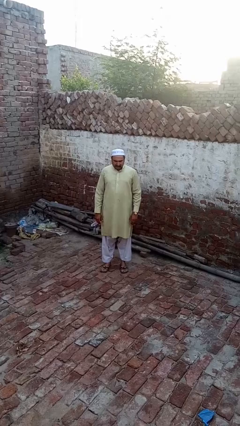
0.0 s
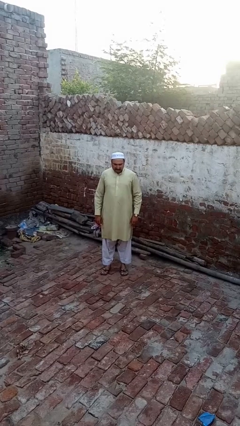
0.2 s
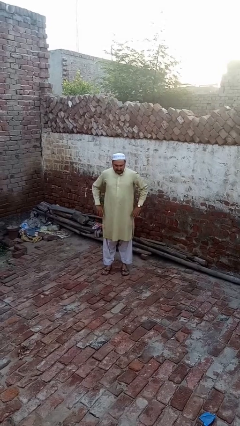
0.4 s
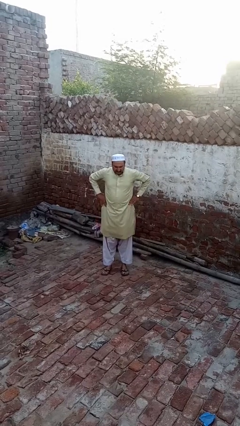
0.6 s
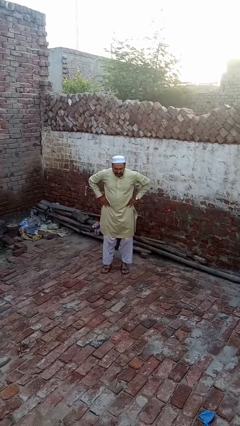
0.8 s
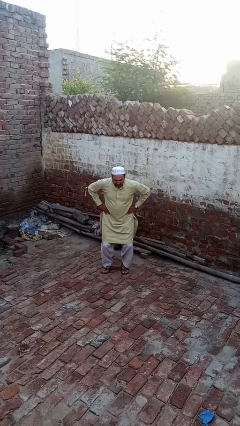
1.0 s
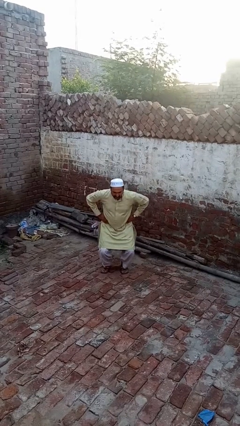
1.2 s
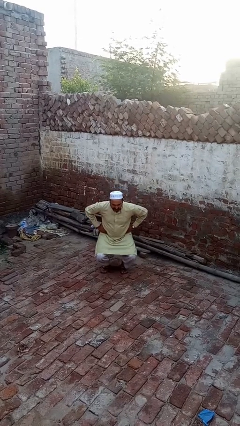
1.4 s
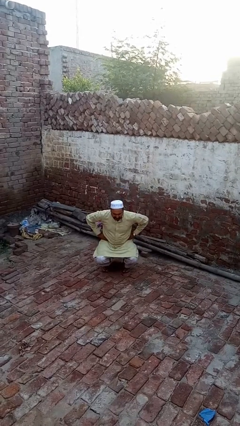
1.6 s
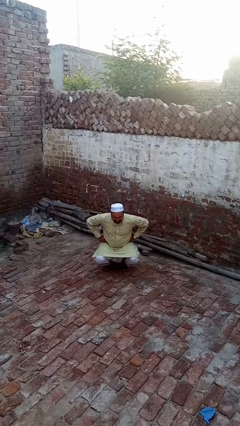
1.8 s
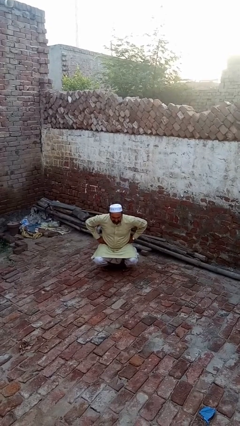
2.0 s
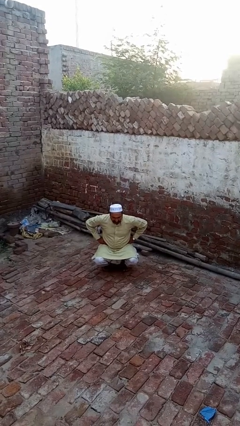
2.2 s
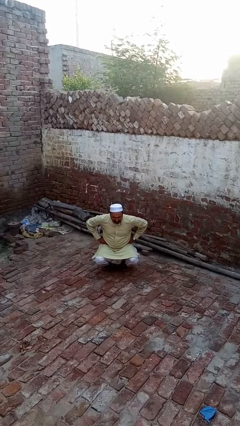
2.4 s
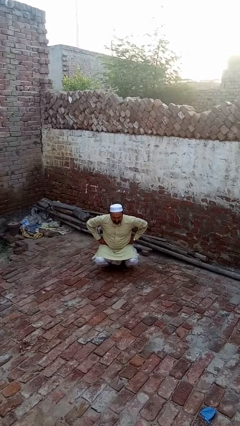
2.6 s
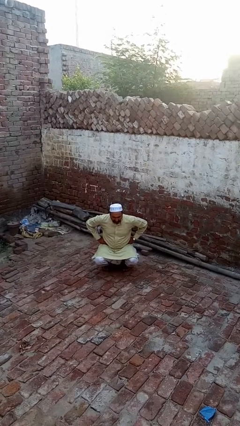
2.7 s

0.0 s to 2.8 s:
person squats

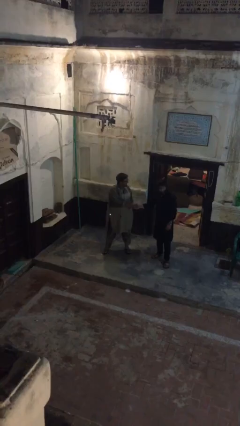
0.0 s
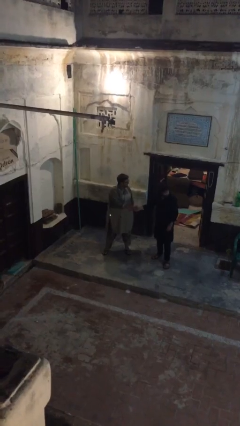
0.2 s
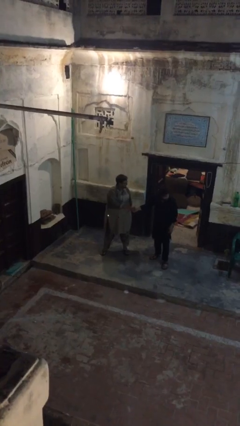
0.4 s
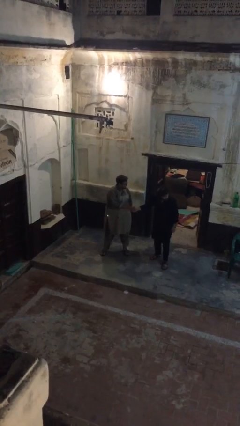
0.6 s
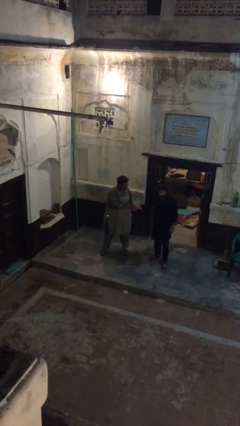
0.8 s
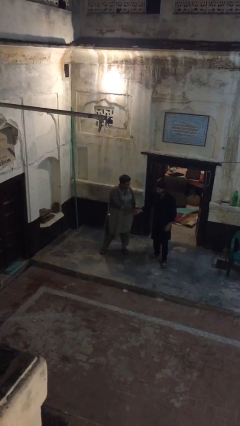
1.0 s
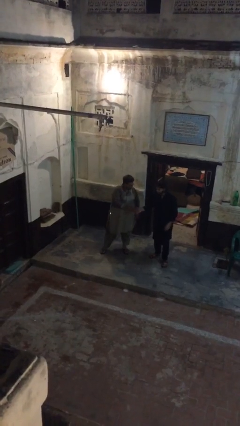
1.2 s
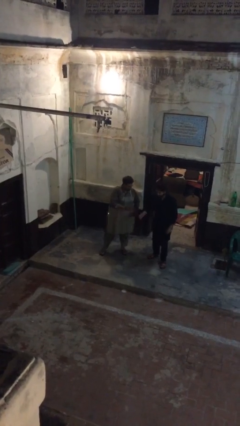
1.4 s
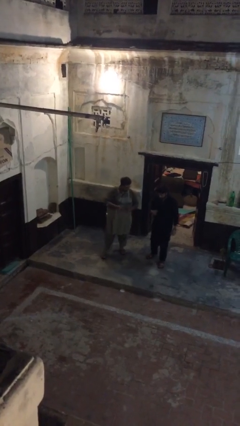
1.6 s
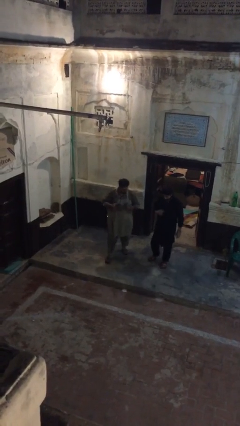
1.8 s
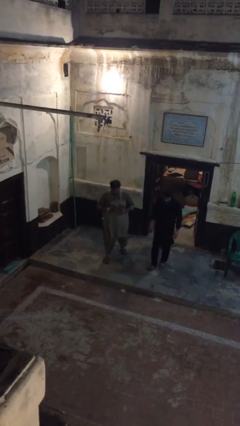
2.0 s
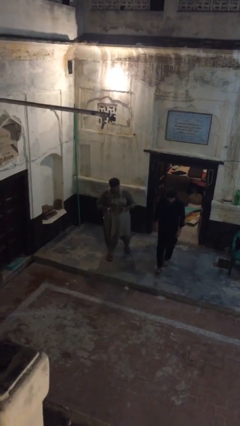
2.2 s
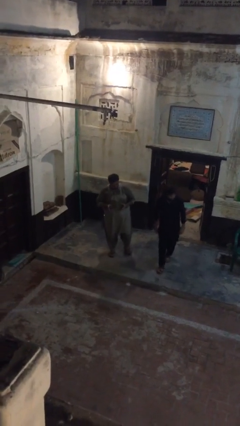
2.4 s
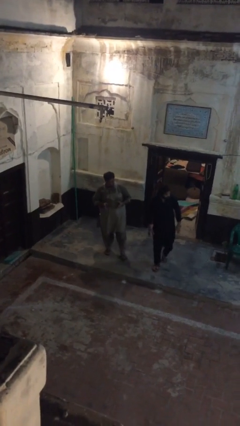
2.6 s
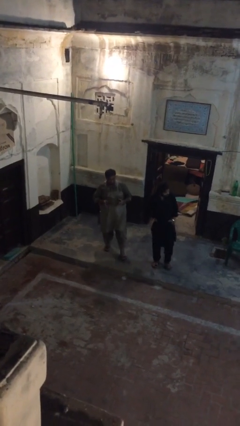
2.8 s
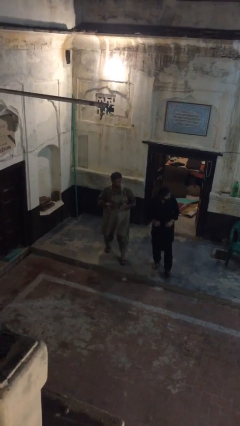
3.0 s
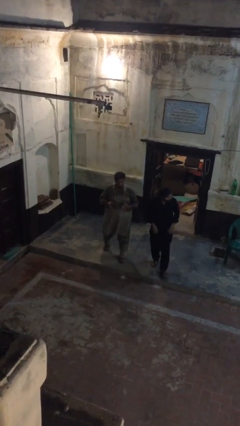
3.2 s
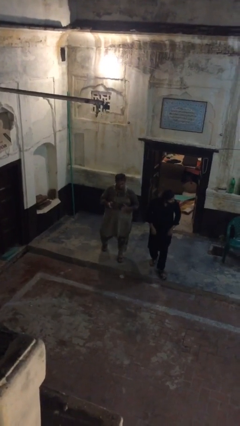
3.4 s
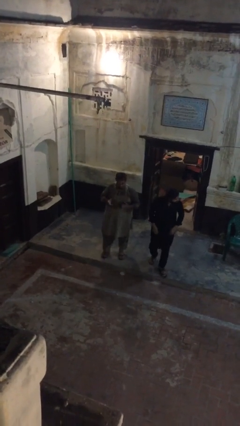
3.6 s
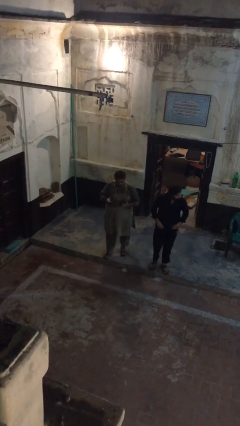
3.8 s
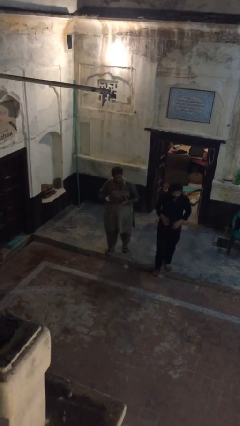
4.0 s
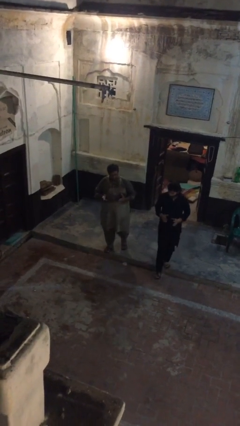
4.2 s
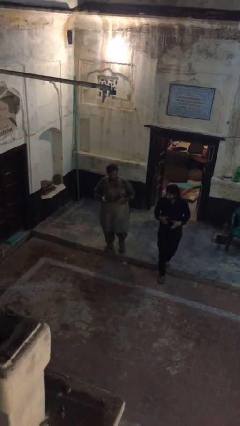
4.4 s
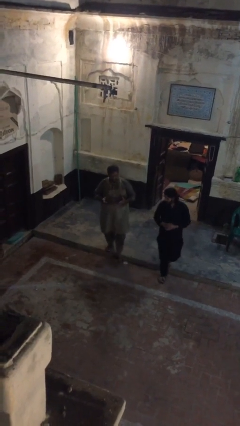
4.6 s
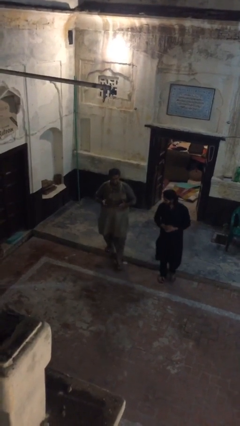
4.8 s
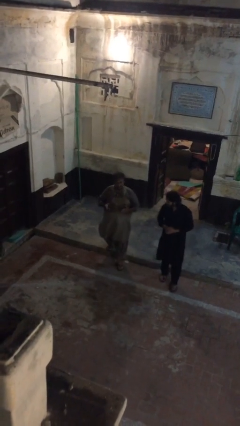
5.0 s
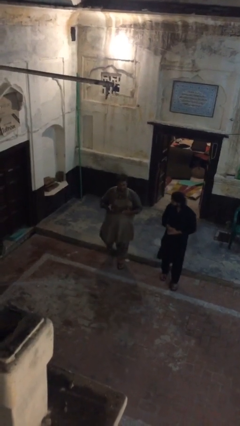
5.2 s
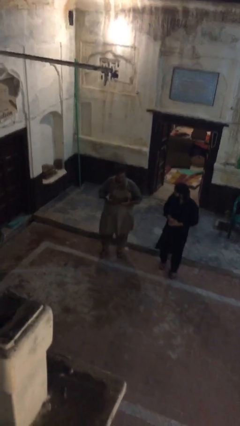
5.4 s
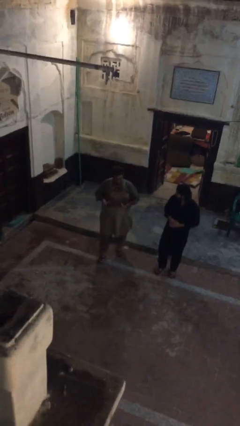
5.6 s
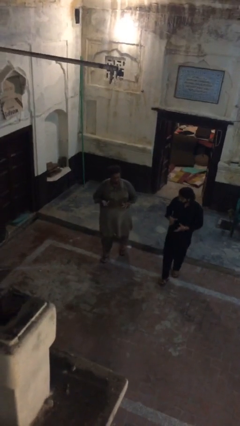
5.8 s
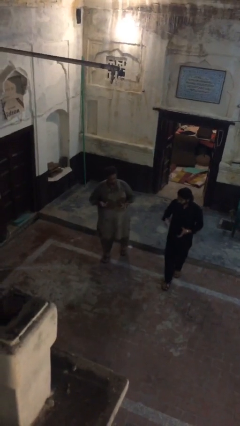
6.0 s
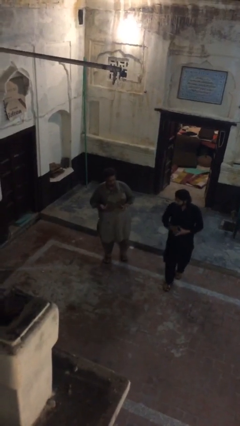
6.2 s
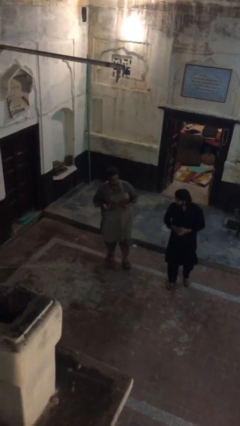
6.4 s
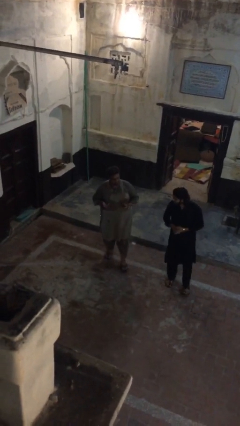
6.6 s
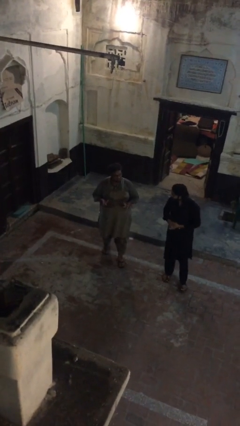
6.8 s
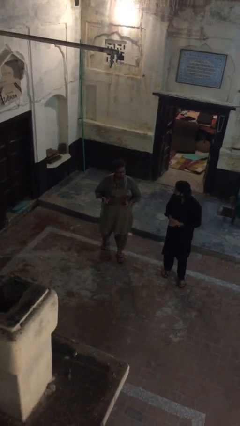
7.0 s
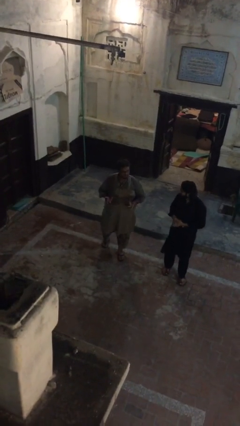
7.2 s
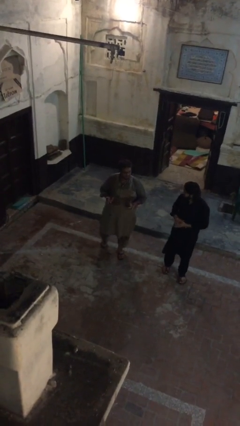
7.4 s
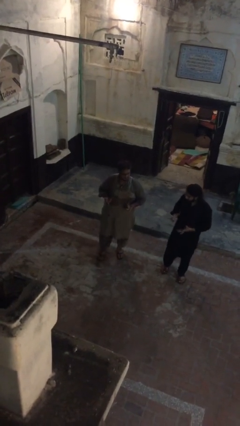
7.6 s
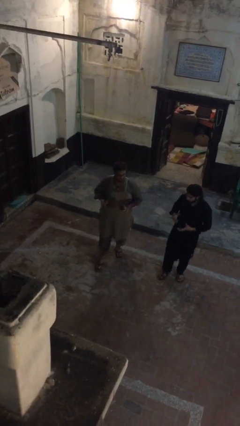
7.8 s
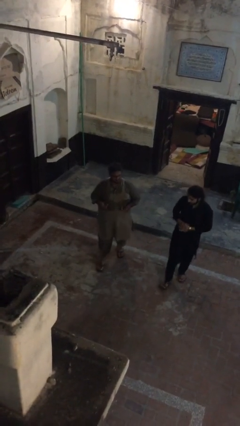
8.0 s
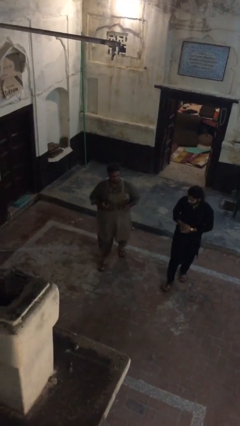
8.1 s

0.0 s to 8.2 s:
person talks to person

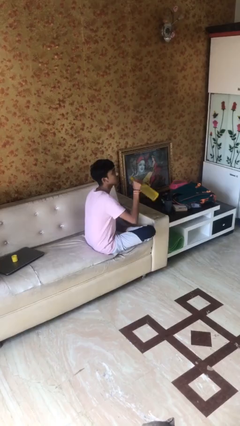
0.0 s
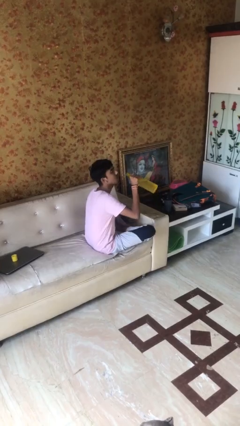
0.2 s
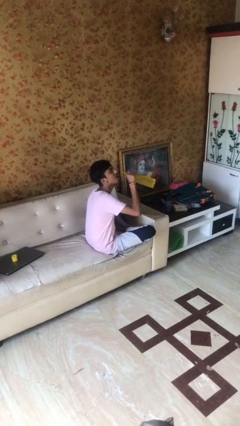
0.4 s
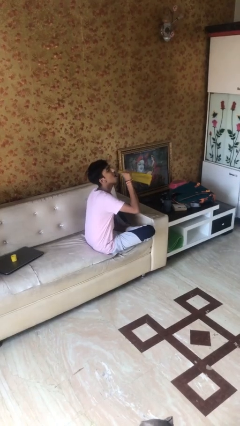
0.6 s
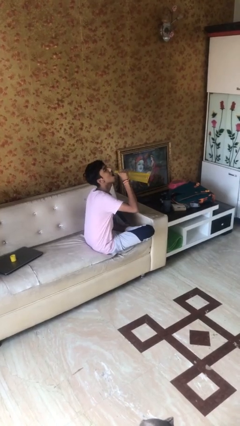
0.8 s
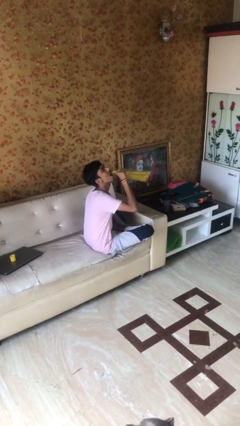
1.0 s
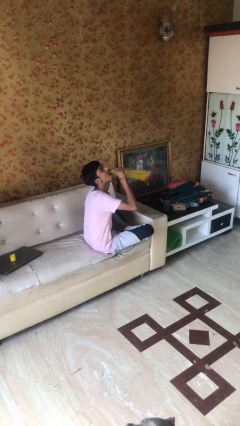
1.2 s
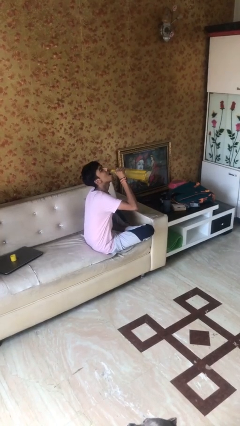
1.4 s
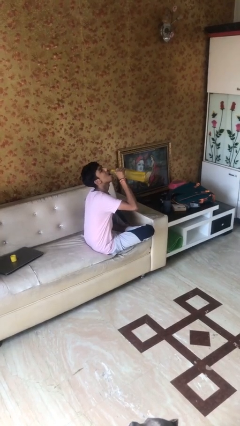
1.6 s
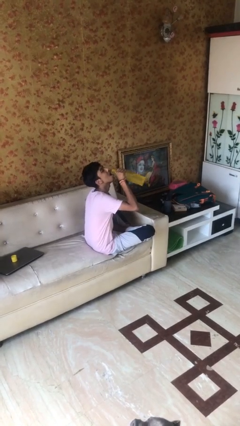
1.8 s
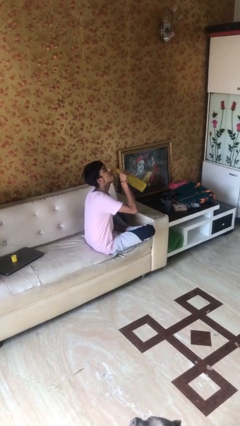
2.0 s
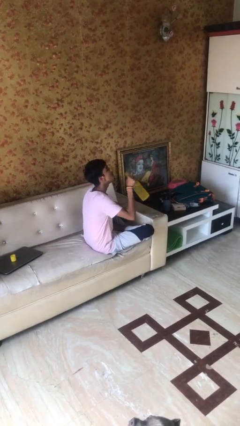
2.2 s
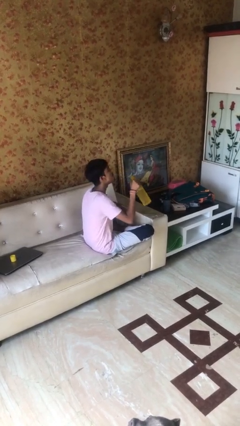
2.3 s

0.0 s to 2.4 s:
person drinks from bottle

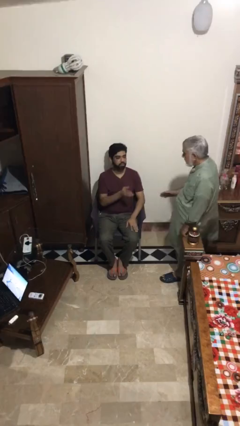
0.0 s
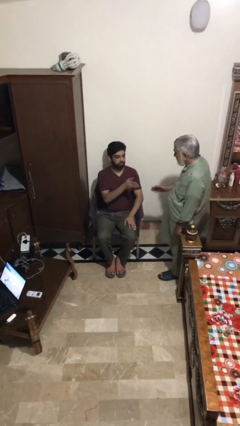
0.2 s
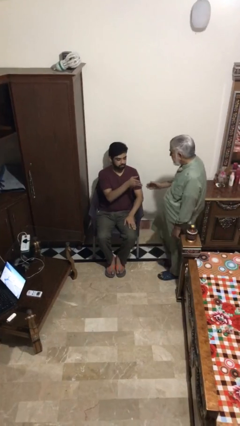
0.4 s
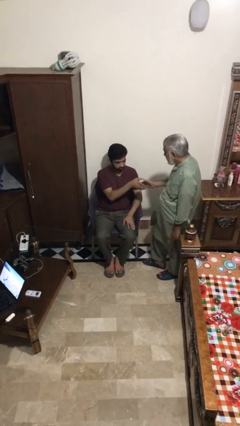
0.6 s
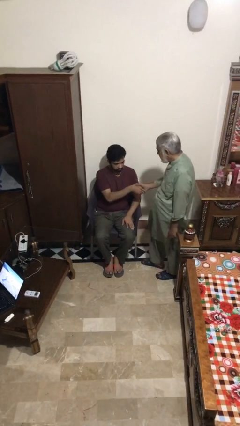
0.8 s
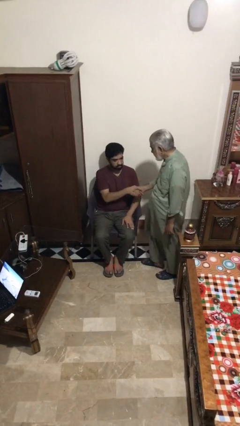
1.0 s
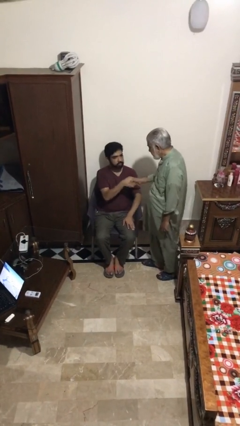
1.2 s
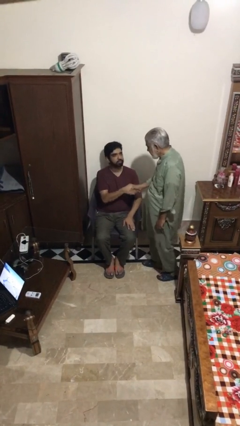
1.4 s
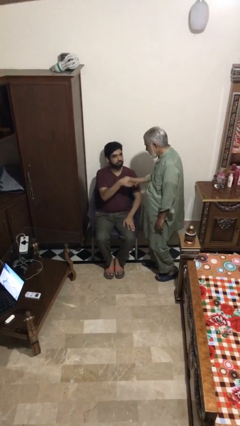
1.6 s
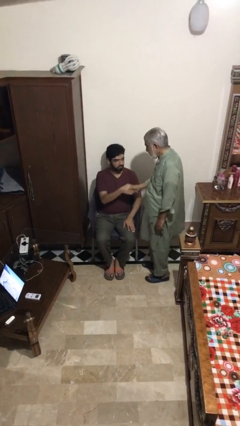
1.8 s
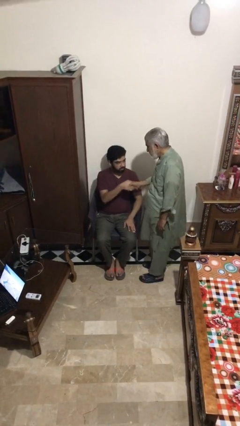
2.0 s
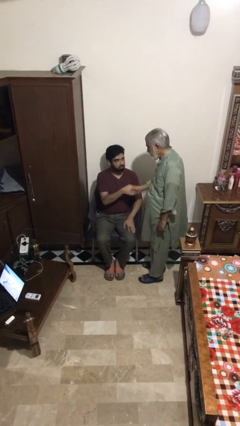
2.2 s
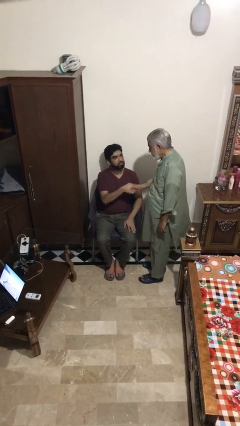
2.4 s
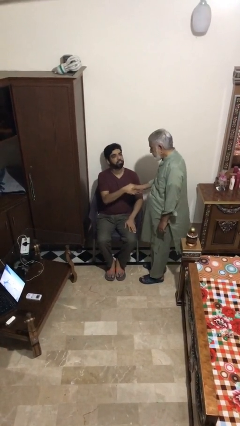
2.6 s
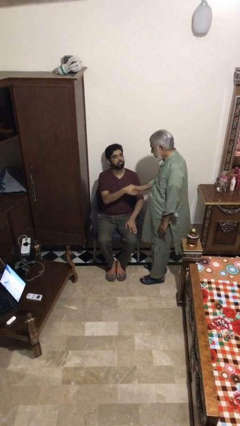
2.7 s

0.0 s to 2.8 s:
person shakes hand

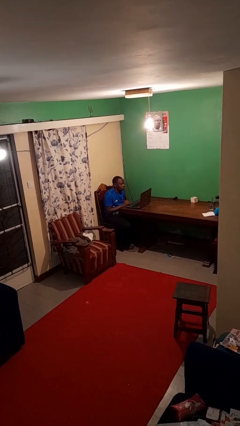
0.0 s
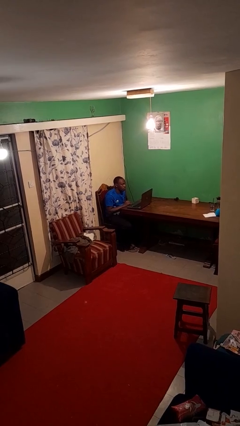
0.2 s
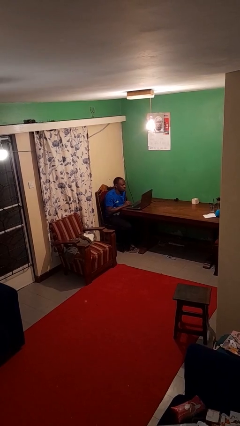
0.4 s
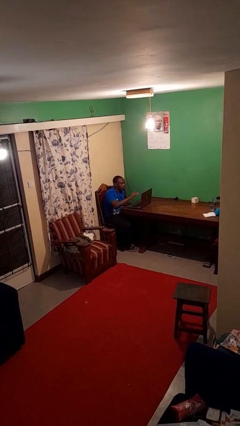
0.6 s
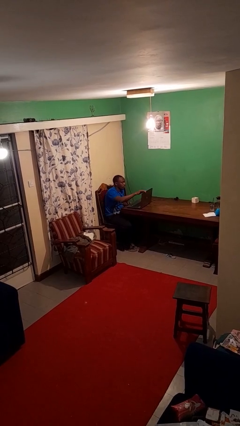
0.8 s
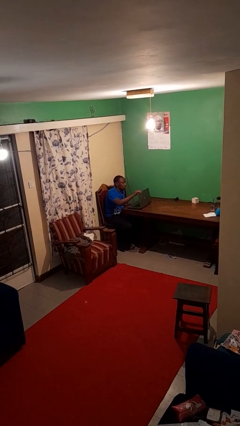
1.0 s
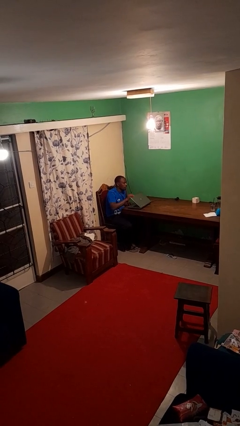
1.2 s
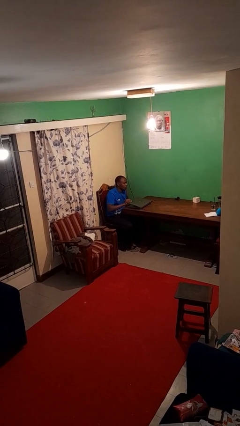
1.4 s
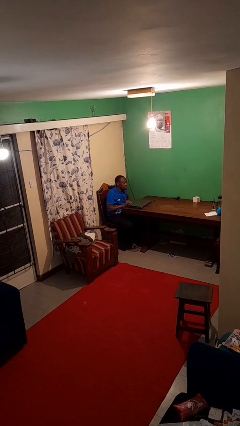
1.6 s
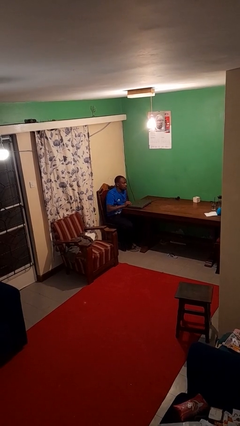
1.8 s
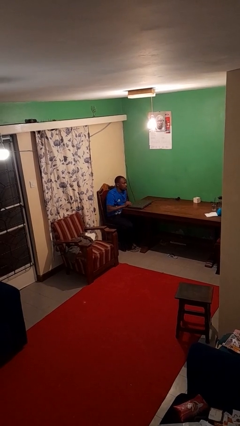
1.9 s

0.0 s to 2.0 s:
person closes laptop
